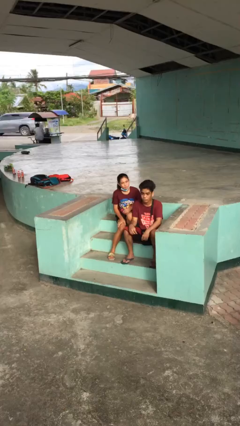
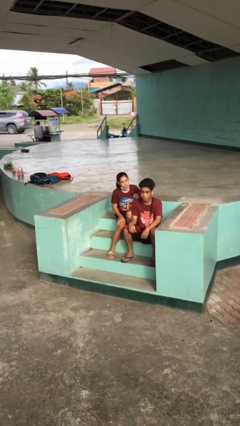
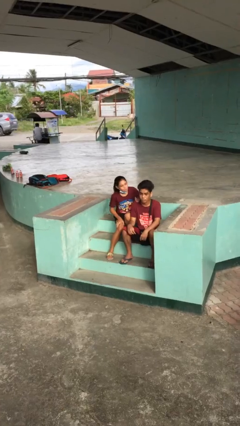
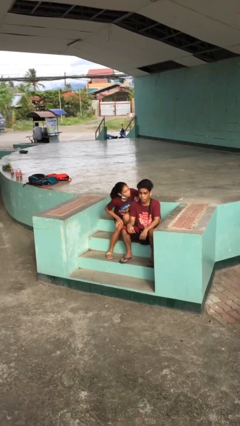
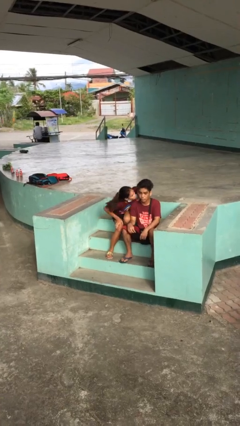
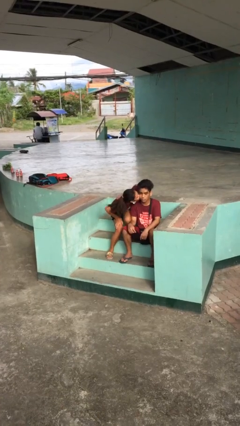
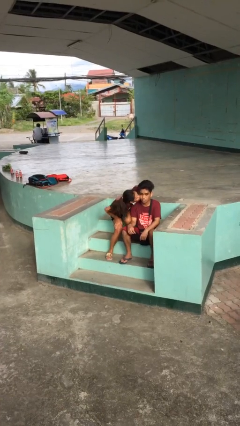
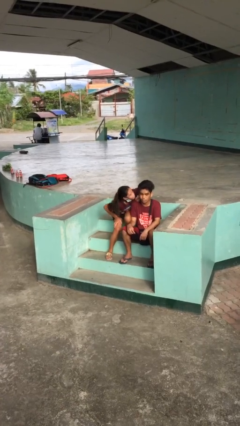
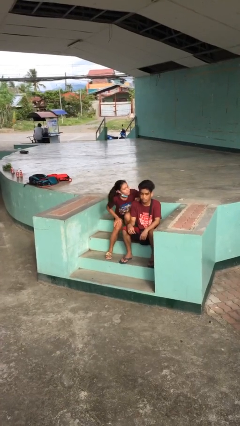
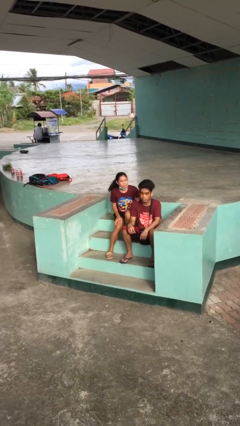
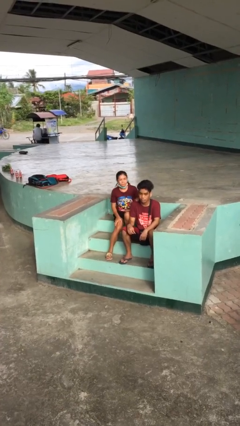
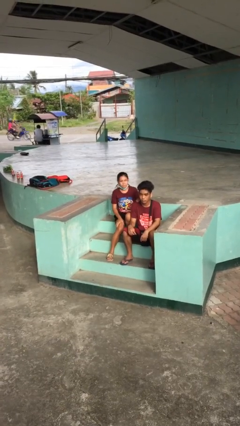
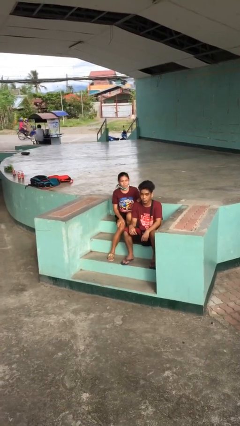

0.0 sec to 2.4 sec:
person kisses cheek of person

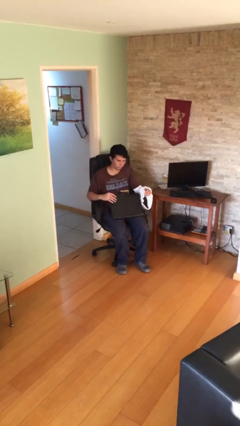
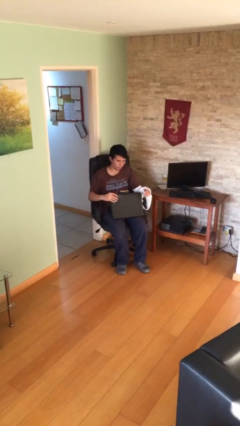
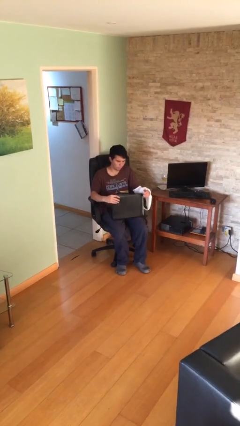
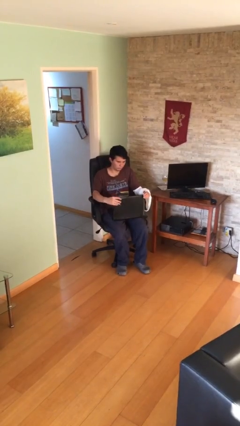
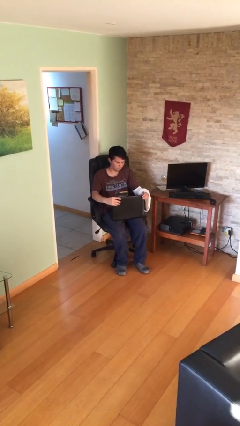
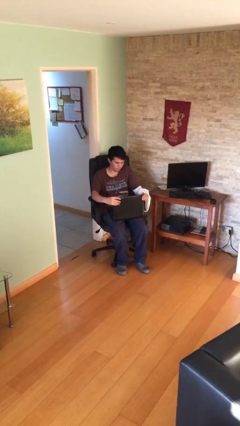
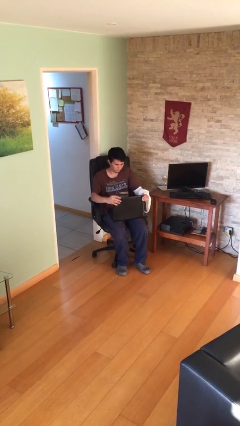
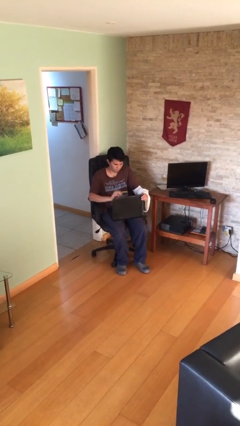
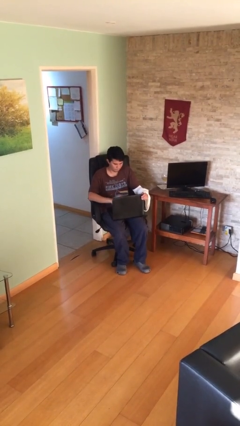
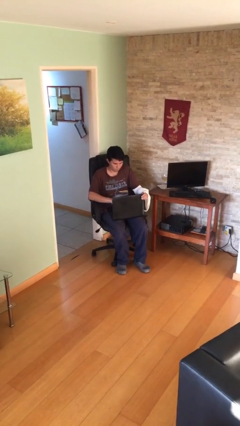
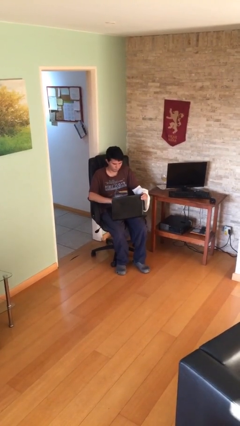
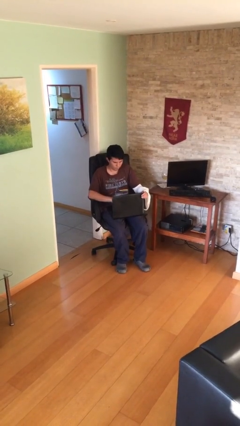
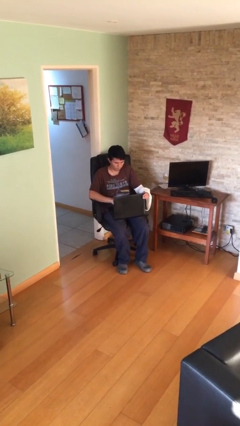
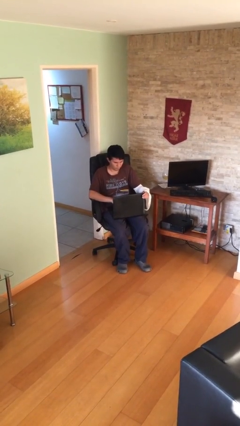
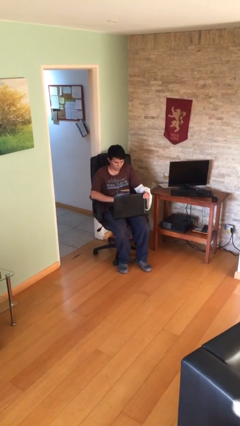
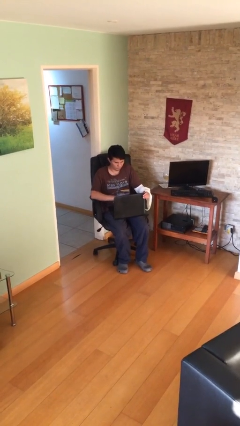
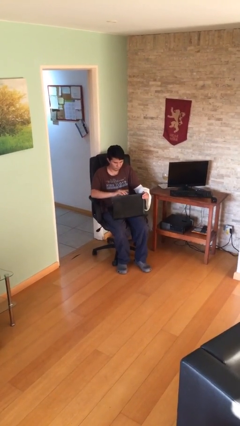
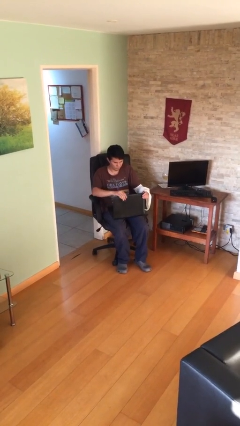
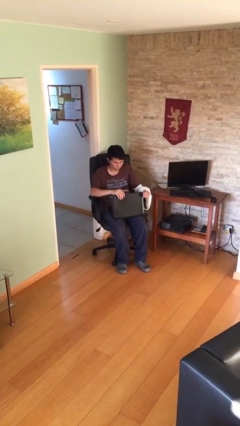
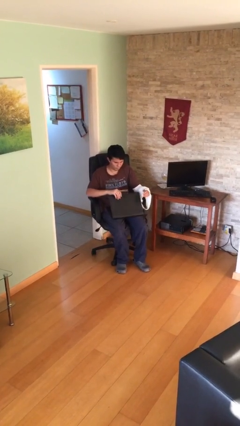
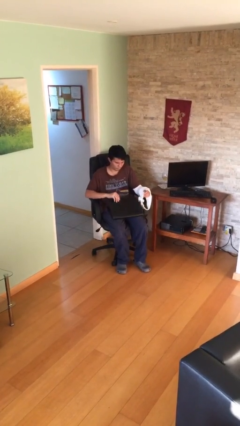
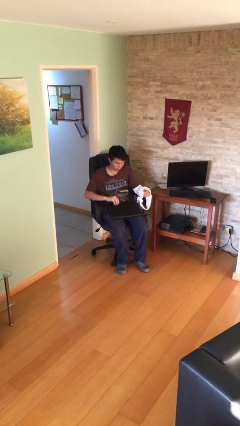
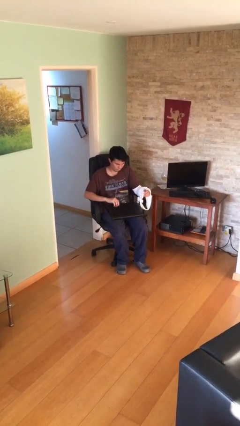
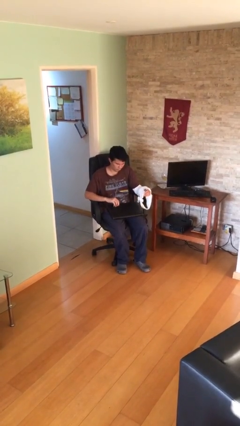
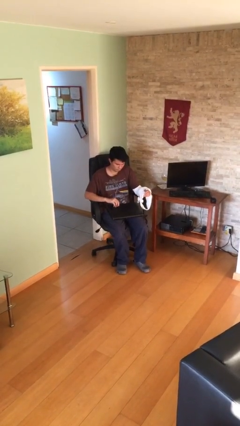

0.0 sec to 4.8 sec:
person interacts with laptop

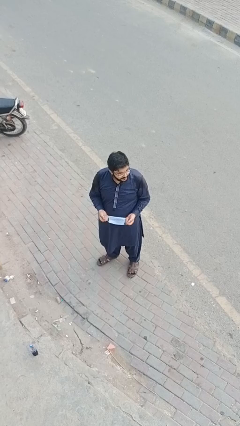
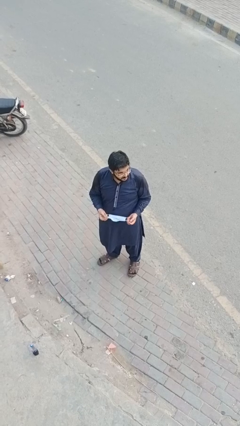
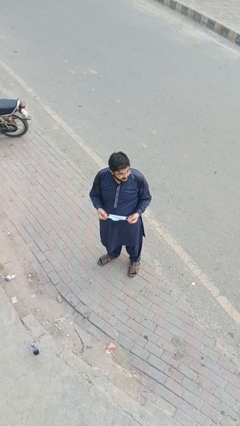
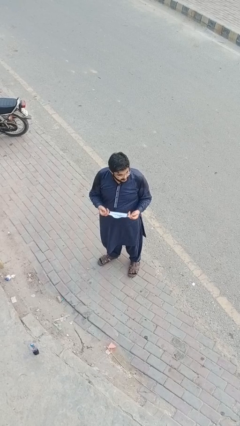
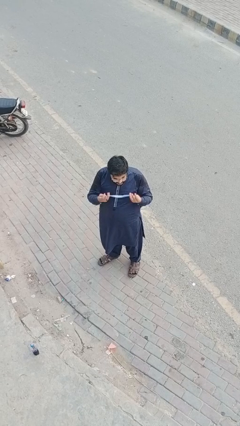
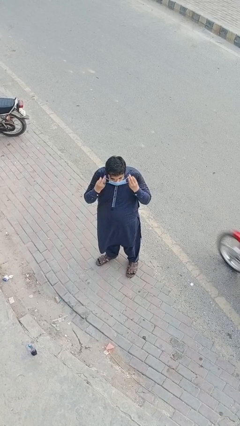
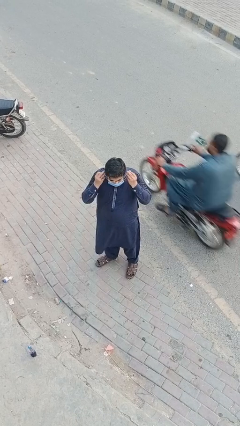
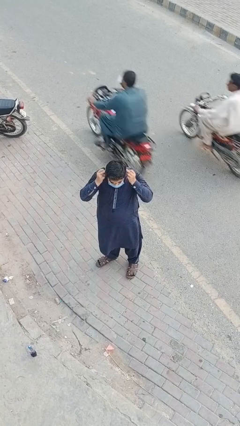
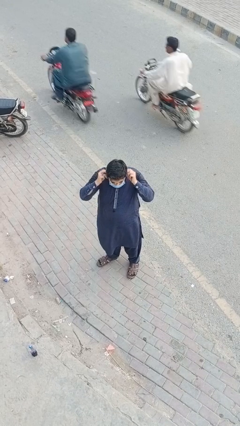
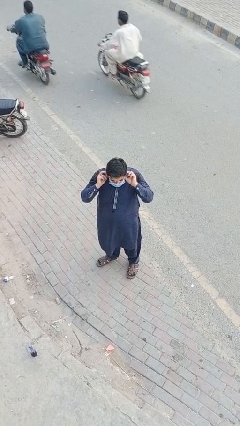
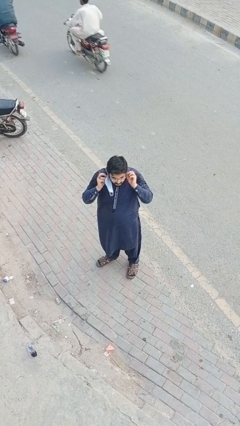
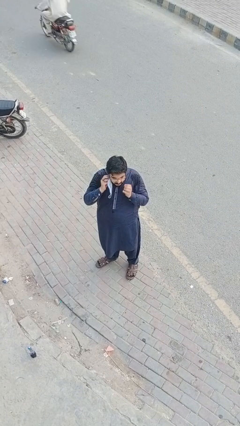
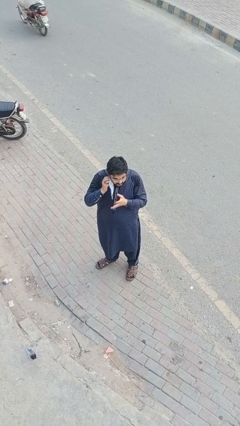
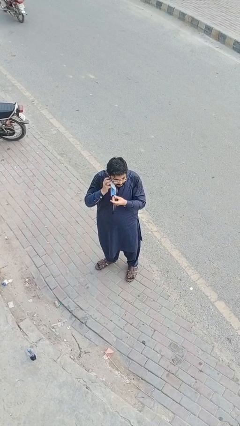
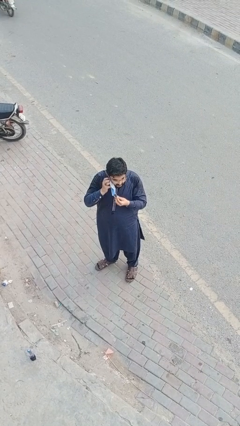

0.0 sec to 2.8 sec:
person puts on facemask

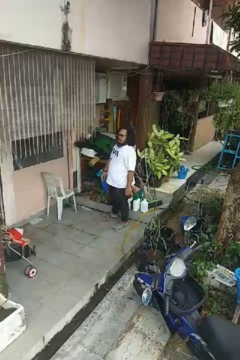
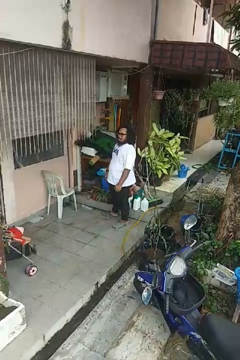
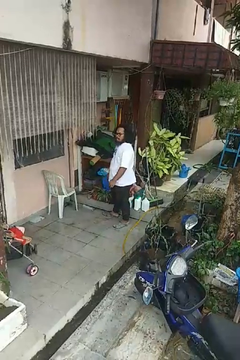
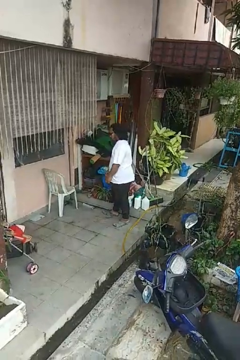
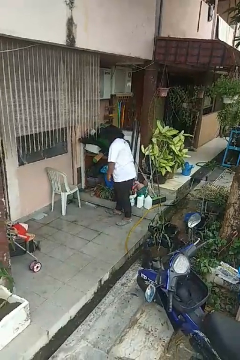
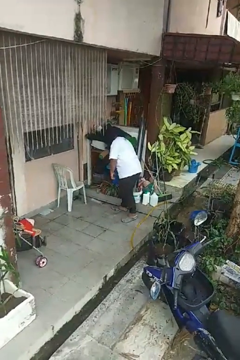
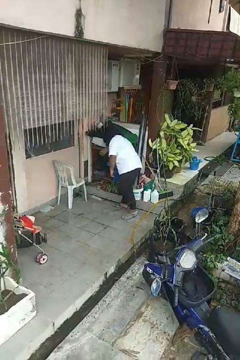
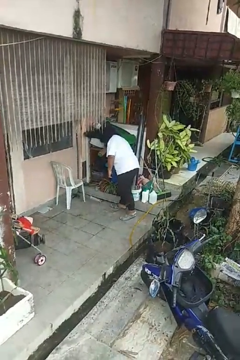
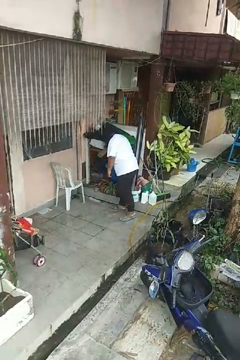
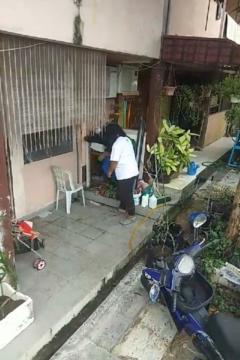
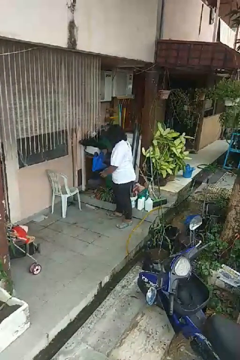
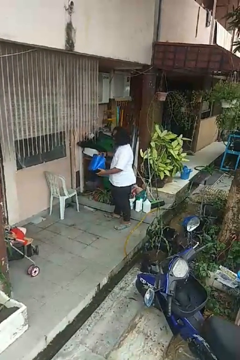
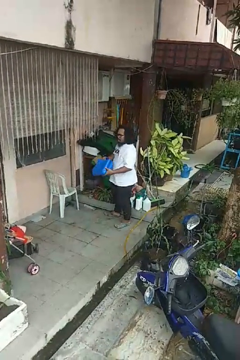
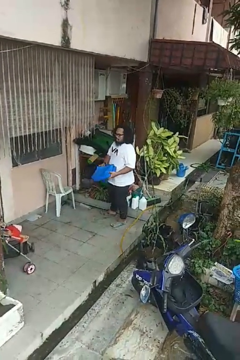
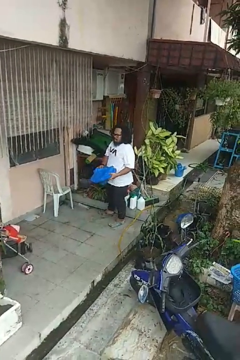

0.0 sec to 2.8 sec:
person picks up object from cabinet

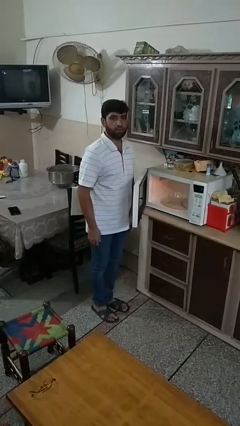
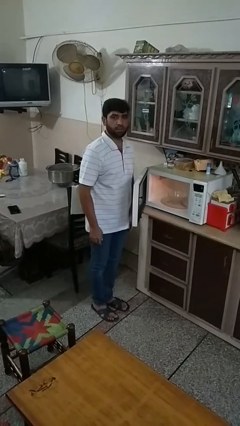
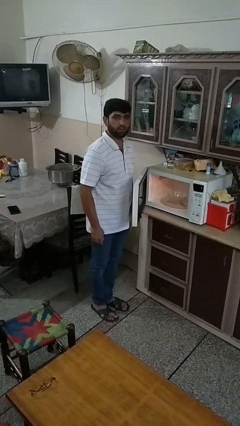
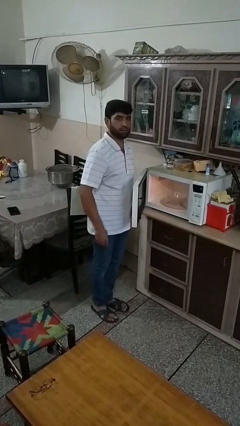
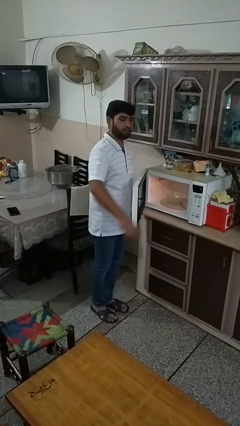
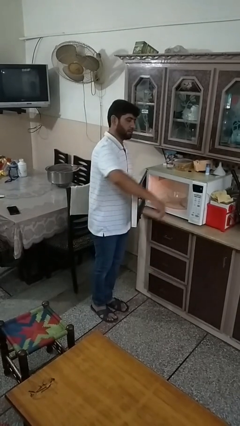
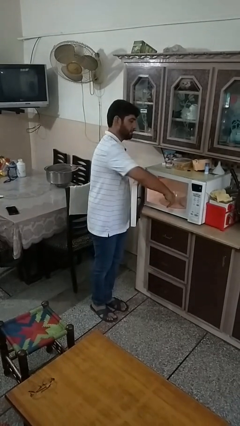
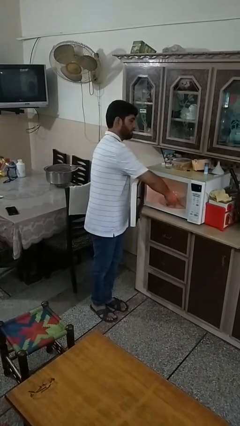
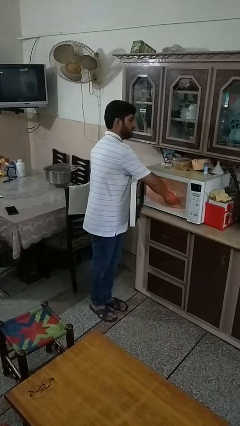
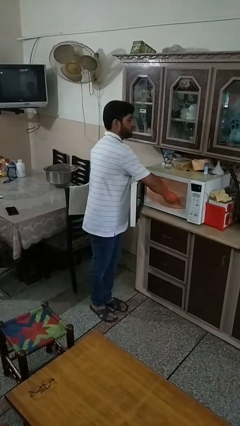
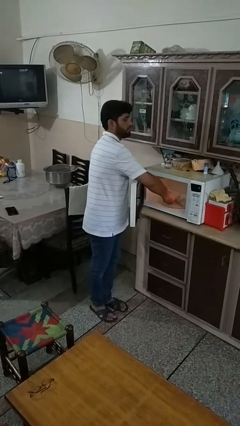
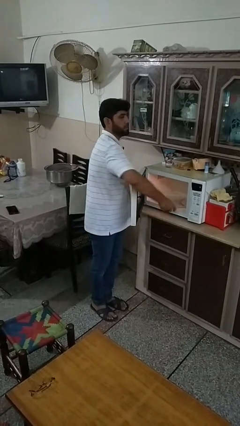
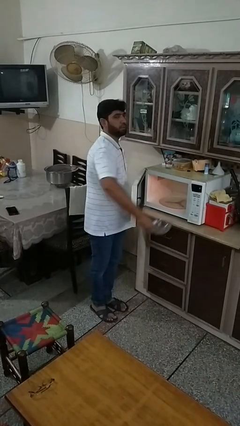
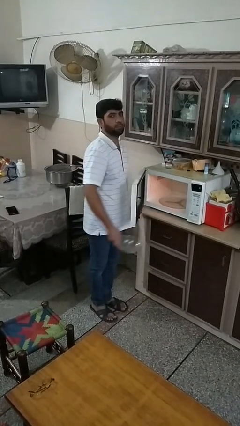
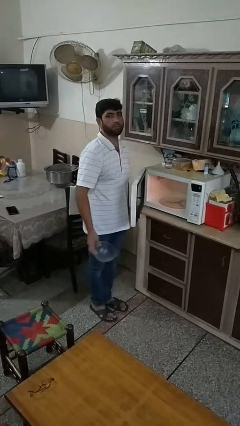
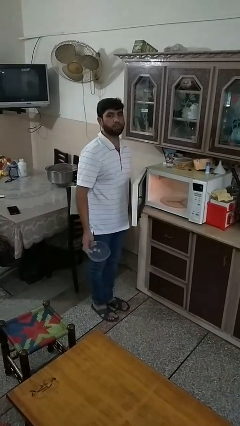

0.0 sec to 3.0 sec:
person takes object from microwave

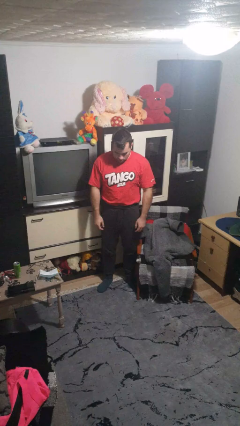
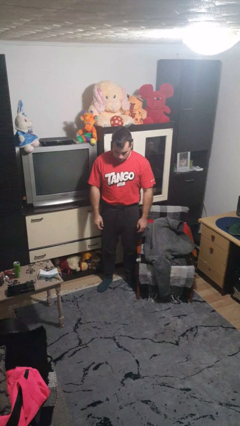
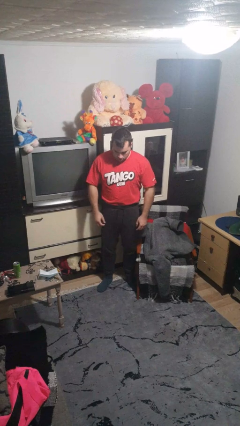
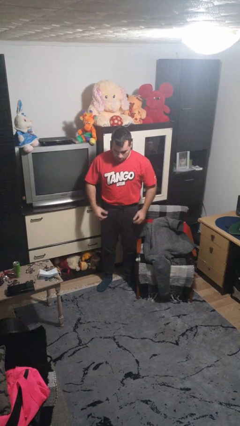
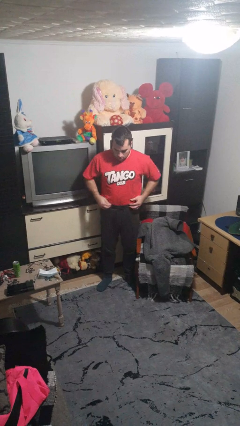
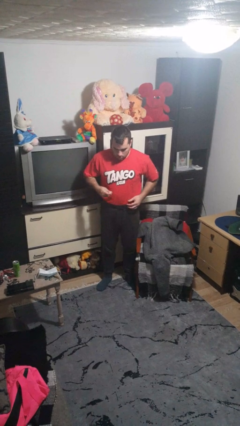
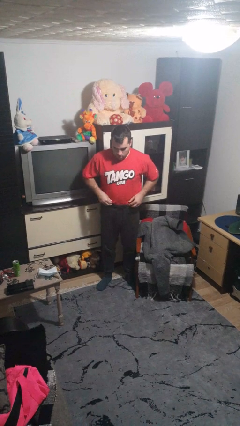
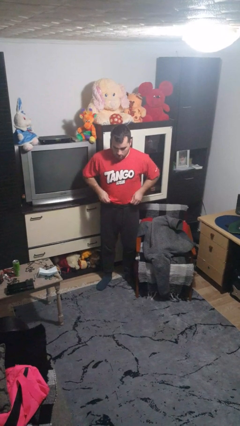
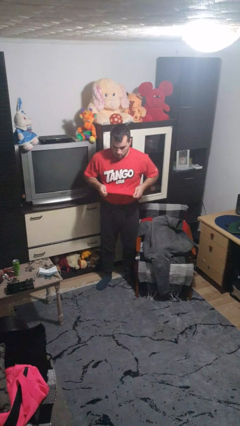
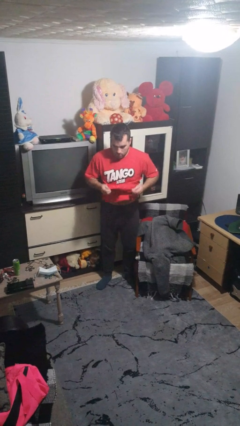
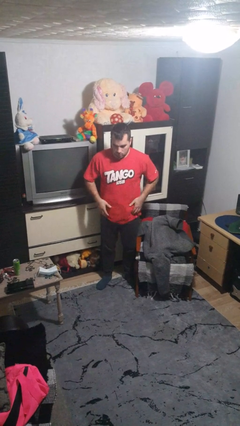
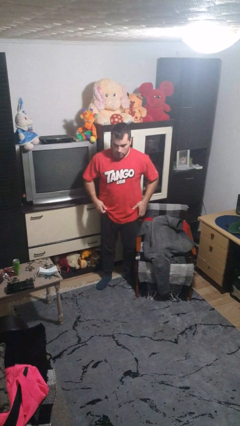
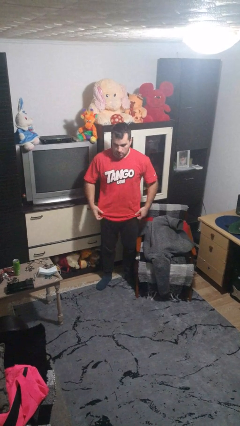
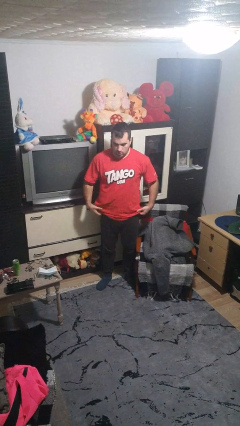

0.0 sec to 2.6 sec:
person untucks shirt
